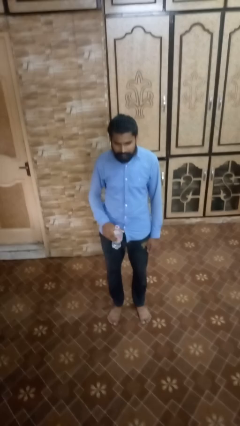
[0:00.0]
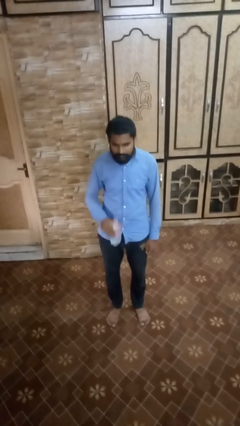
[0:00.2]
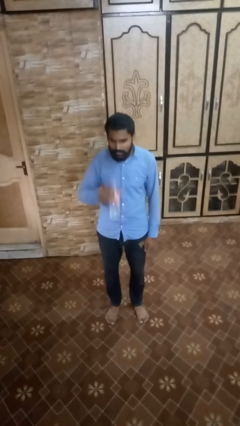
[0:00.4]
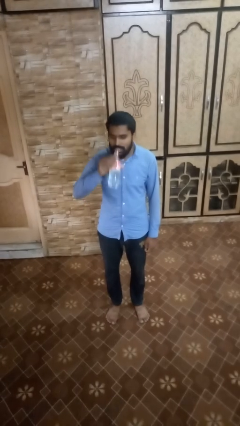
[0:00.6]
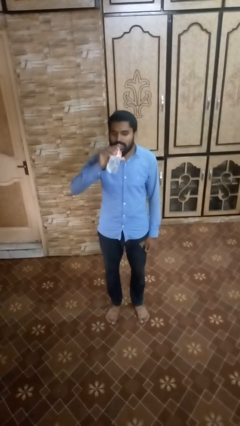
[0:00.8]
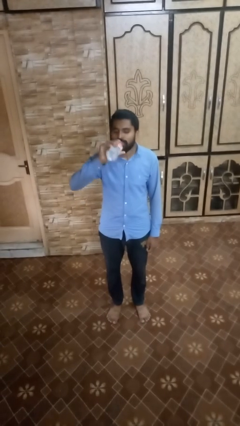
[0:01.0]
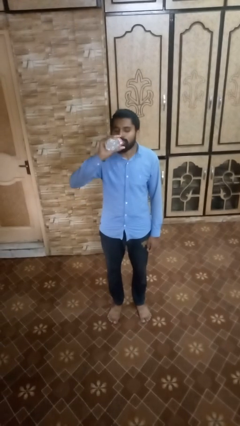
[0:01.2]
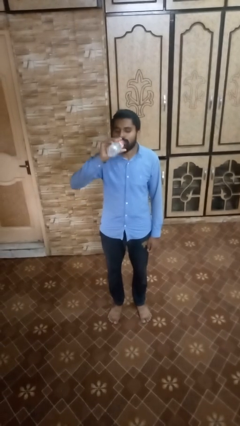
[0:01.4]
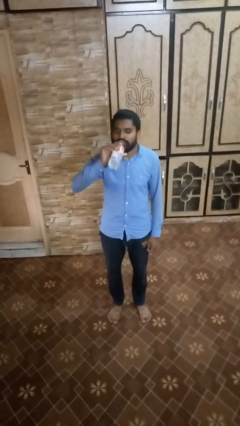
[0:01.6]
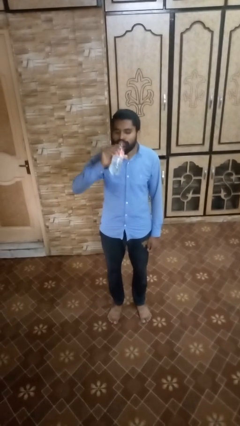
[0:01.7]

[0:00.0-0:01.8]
person drinks from bottle

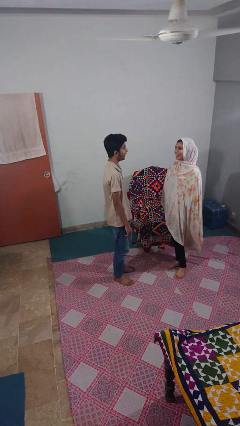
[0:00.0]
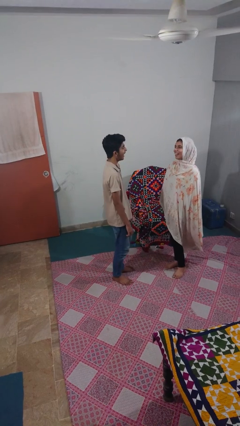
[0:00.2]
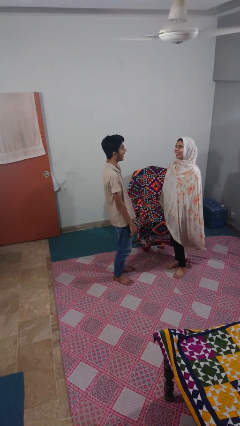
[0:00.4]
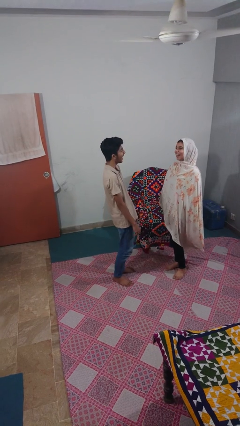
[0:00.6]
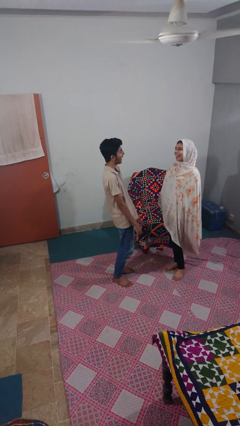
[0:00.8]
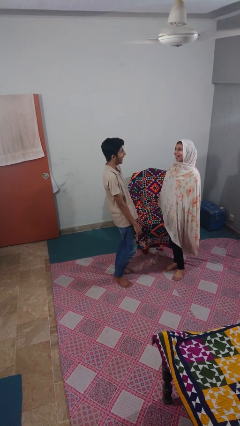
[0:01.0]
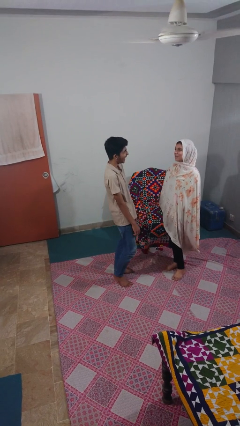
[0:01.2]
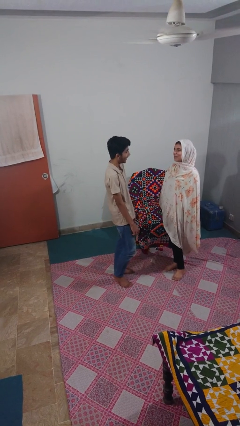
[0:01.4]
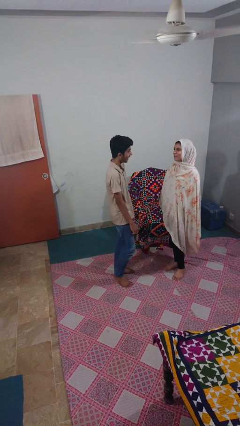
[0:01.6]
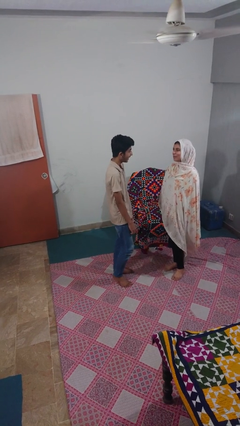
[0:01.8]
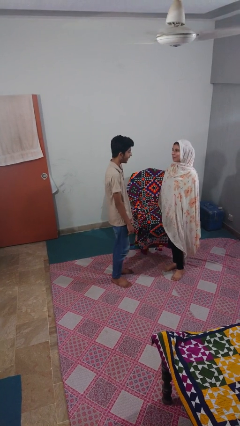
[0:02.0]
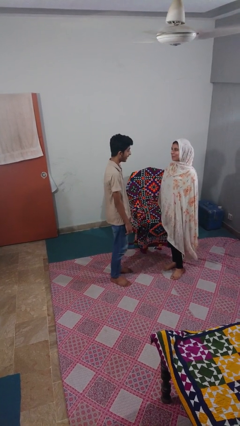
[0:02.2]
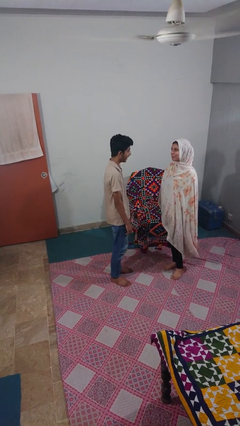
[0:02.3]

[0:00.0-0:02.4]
person laughs with person

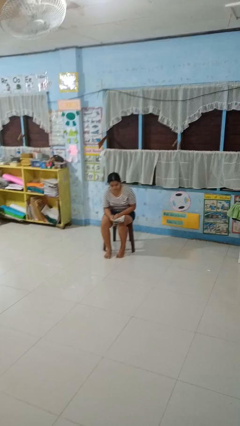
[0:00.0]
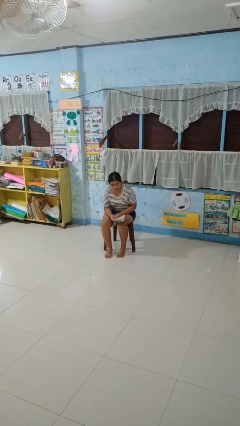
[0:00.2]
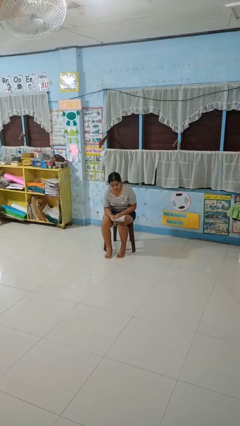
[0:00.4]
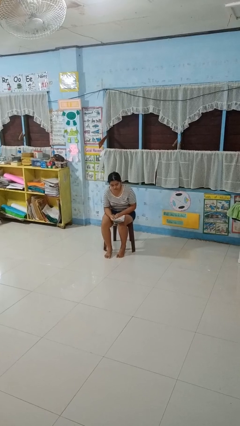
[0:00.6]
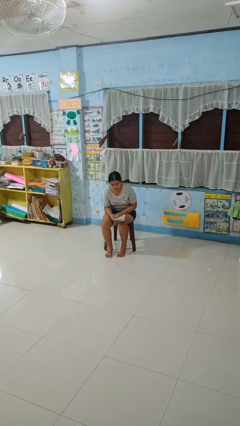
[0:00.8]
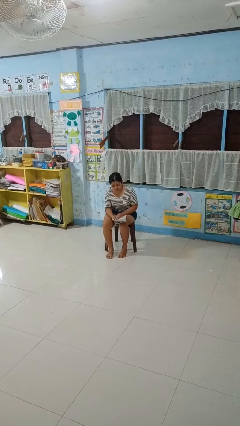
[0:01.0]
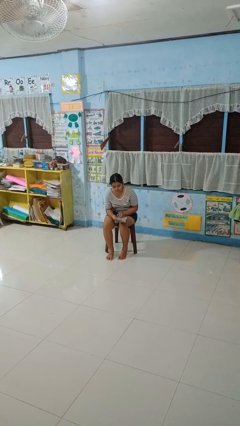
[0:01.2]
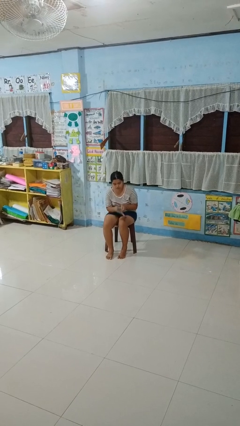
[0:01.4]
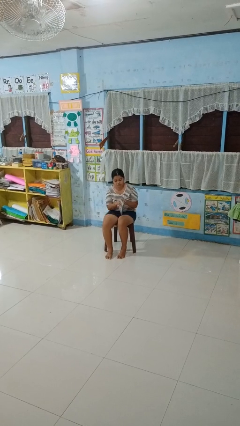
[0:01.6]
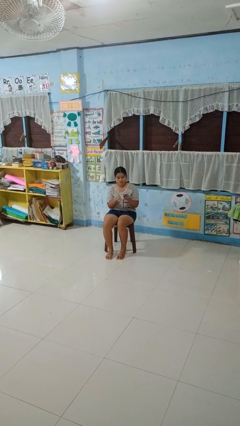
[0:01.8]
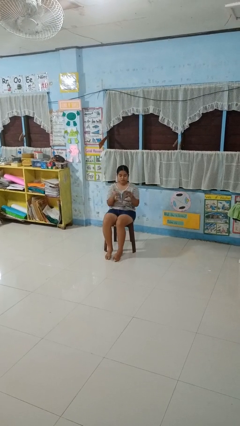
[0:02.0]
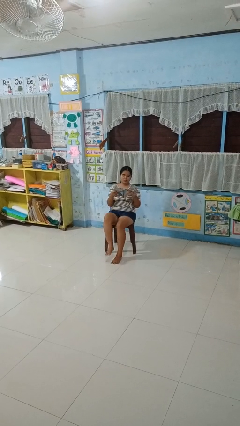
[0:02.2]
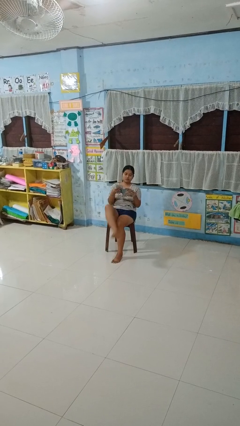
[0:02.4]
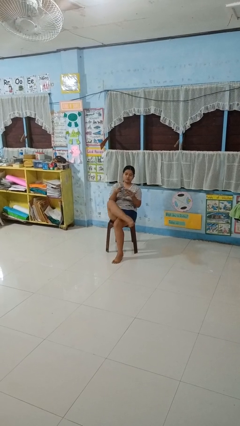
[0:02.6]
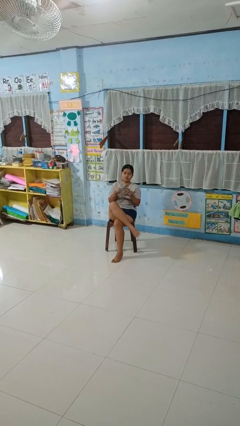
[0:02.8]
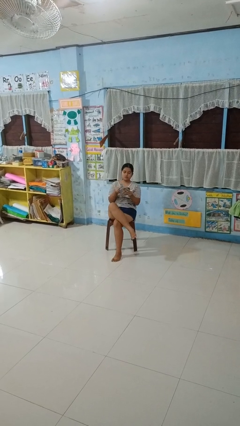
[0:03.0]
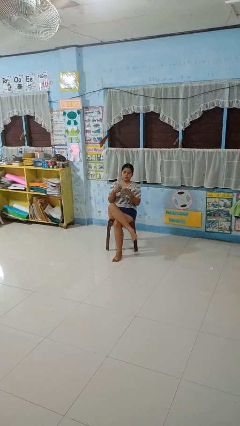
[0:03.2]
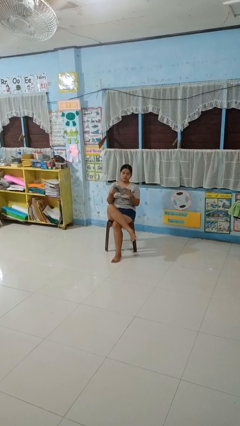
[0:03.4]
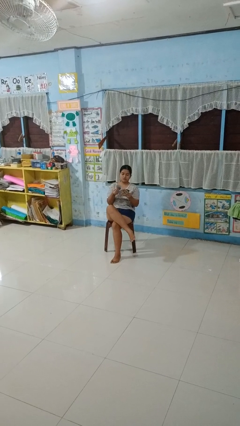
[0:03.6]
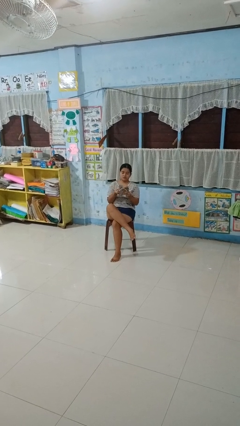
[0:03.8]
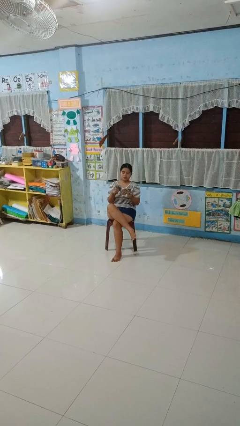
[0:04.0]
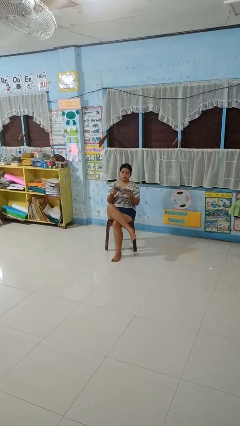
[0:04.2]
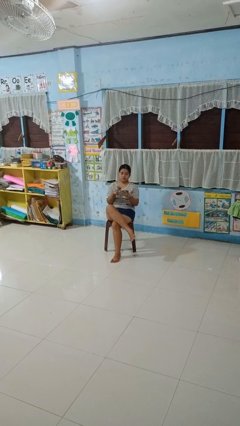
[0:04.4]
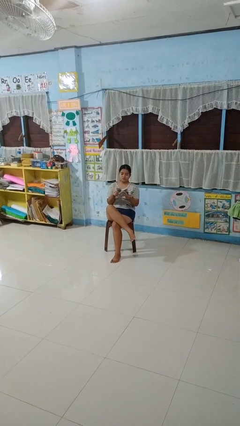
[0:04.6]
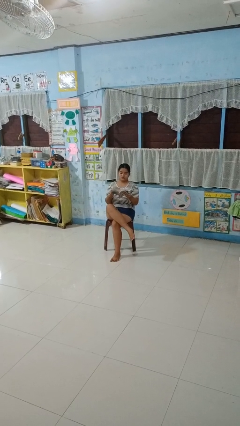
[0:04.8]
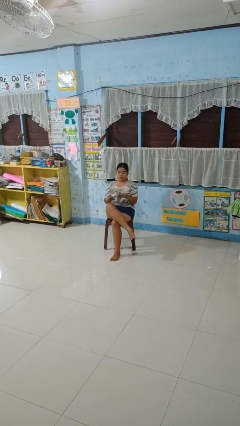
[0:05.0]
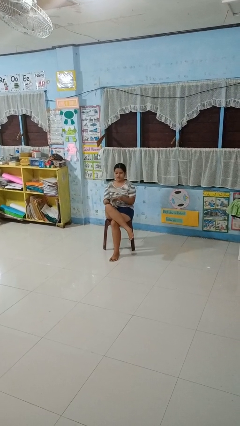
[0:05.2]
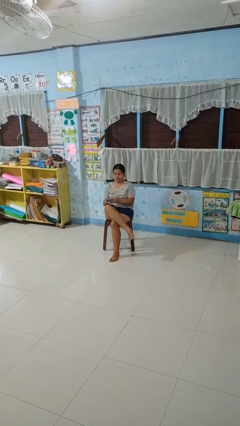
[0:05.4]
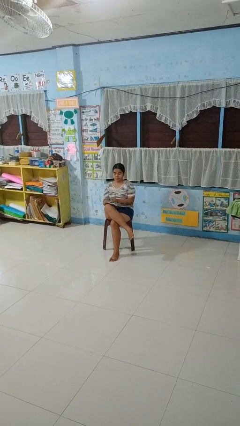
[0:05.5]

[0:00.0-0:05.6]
person reads magazine

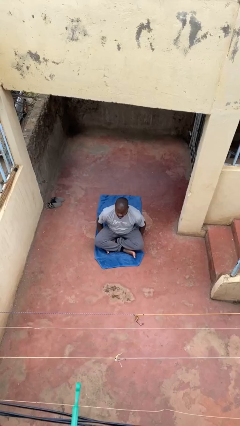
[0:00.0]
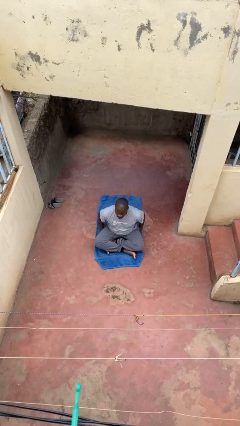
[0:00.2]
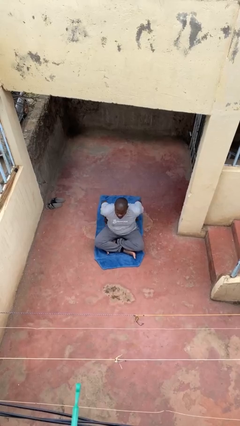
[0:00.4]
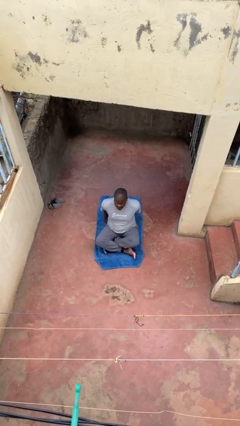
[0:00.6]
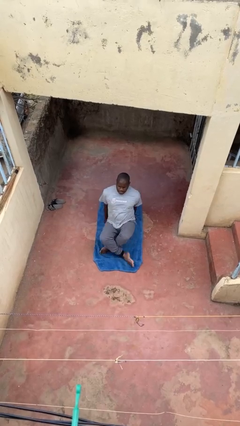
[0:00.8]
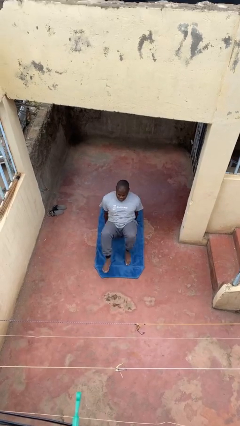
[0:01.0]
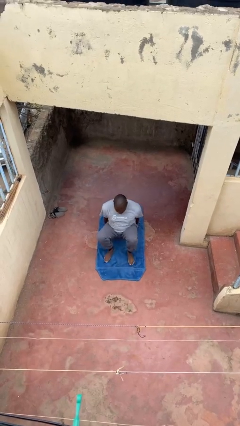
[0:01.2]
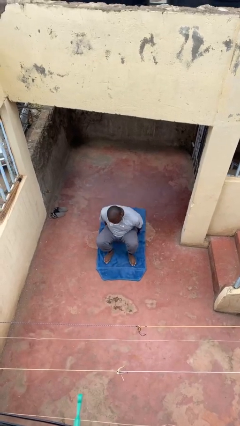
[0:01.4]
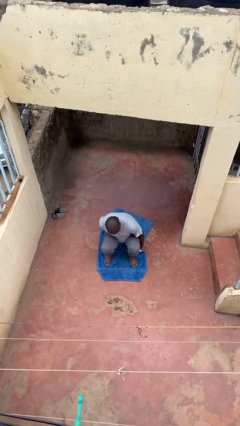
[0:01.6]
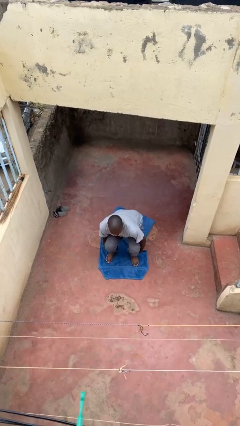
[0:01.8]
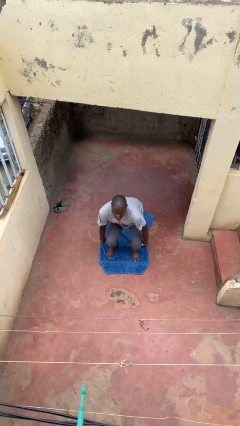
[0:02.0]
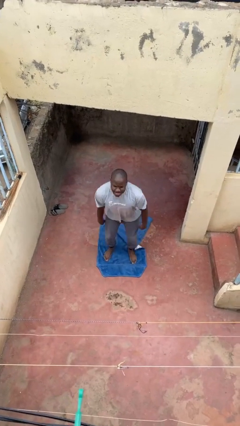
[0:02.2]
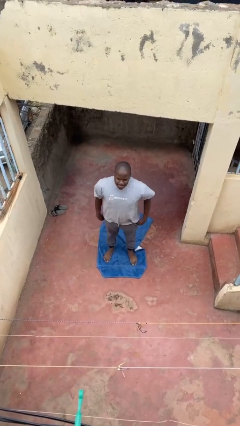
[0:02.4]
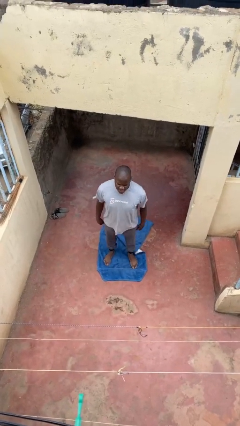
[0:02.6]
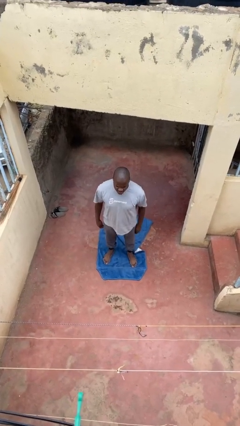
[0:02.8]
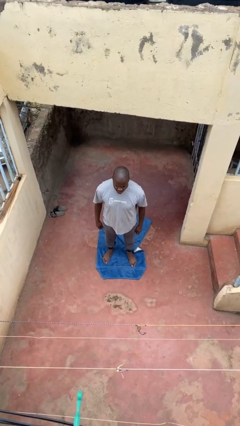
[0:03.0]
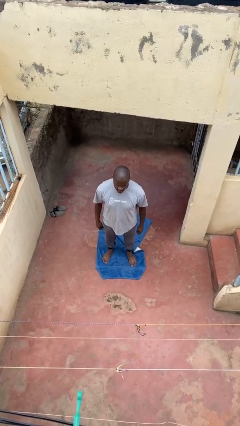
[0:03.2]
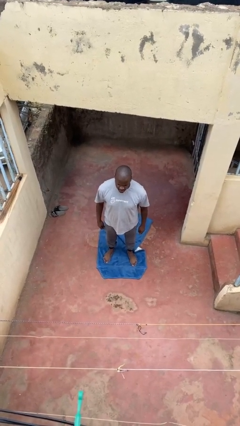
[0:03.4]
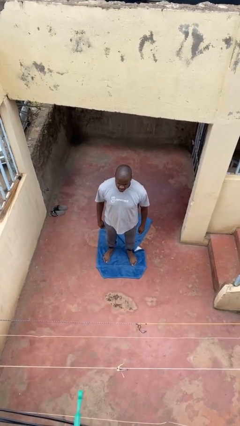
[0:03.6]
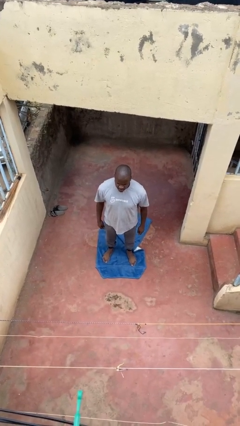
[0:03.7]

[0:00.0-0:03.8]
person stands up from floor

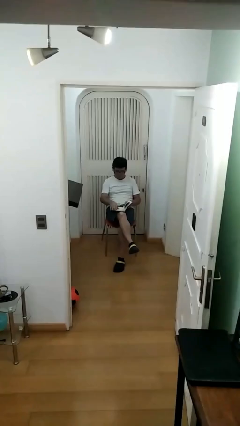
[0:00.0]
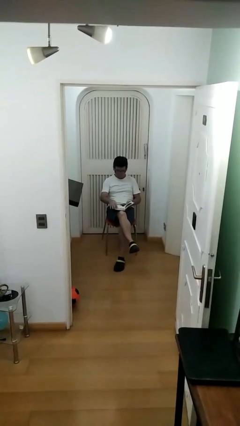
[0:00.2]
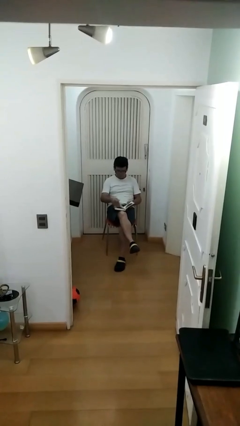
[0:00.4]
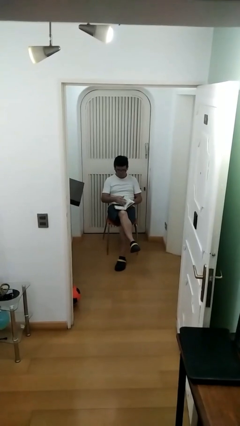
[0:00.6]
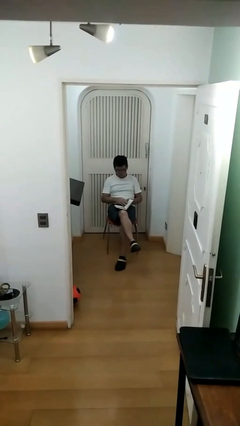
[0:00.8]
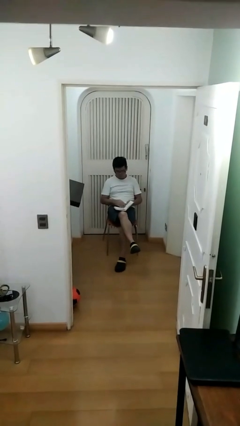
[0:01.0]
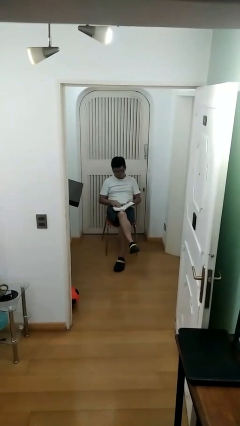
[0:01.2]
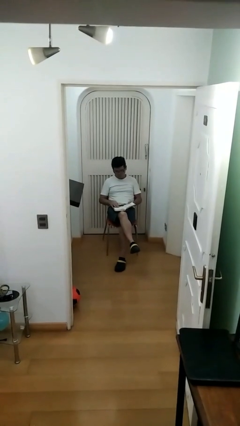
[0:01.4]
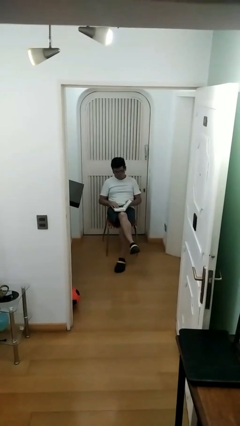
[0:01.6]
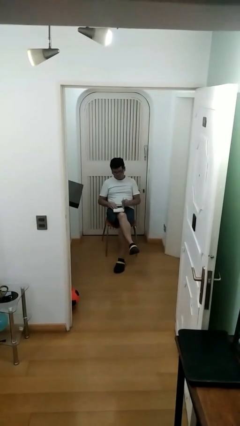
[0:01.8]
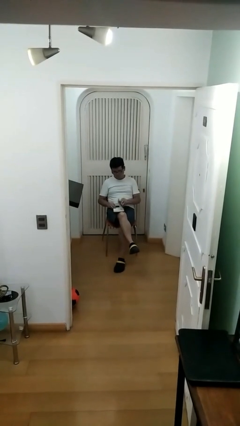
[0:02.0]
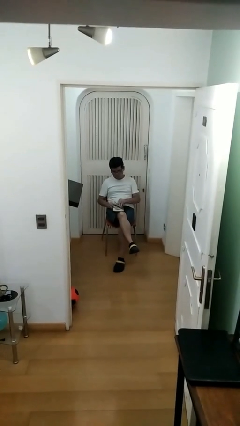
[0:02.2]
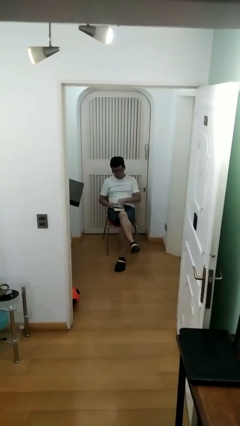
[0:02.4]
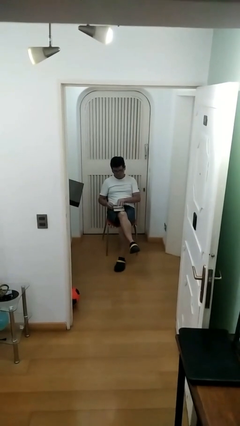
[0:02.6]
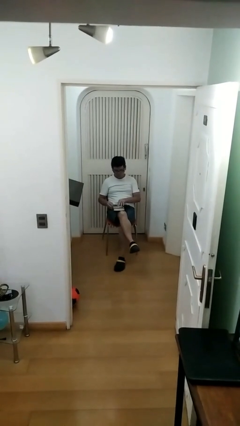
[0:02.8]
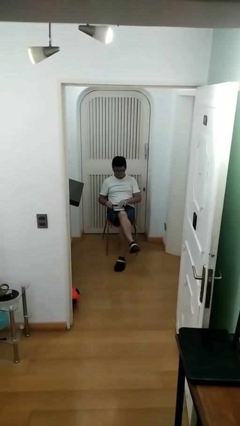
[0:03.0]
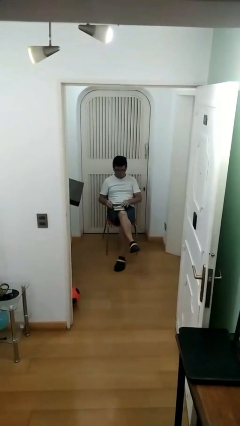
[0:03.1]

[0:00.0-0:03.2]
person reads document

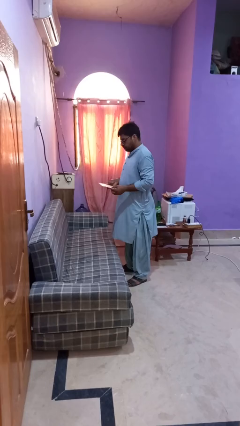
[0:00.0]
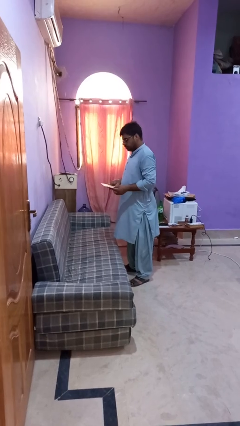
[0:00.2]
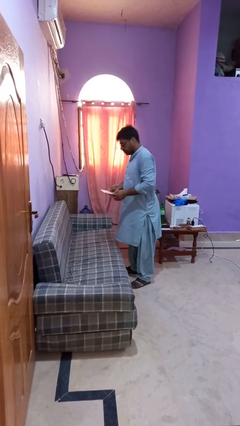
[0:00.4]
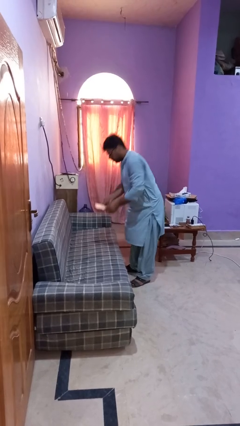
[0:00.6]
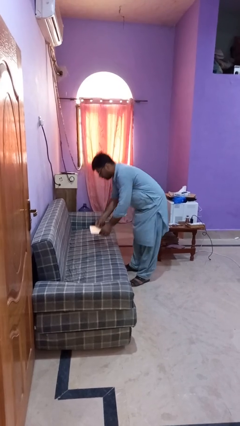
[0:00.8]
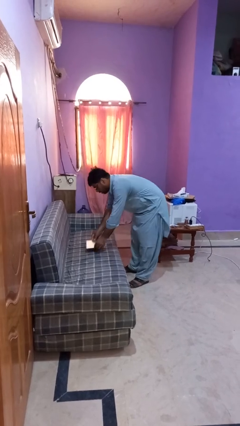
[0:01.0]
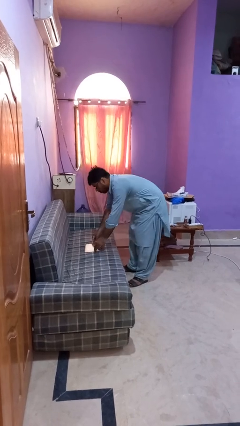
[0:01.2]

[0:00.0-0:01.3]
person puts down object on couch
